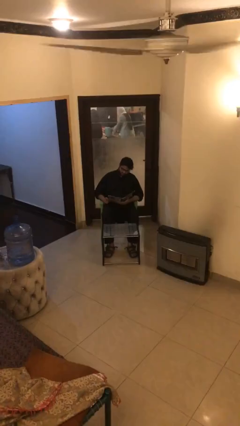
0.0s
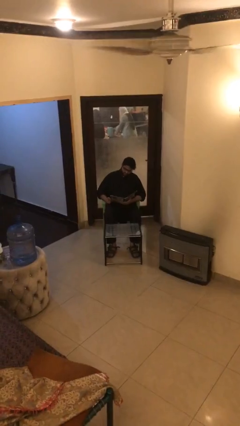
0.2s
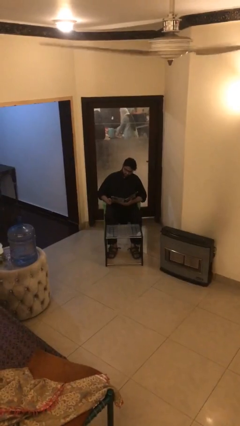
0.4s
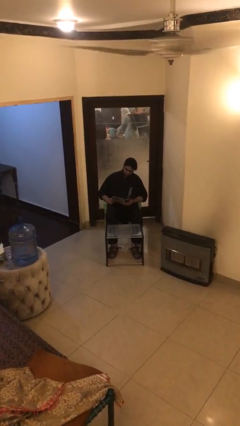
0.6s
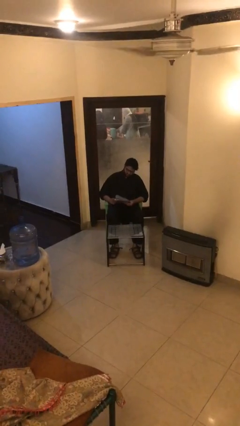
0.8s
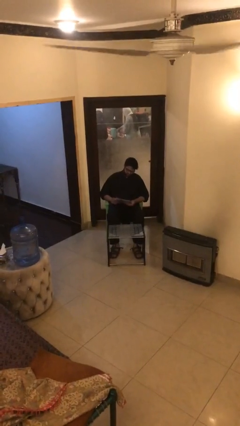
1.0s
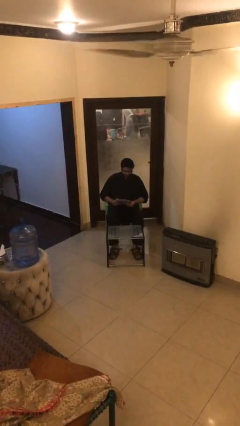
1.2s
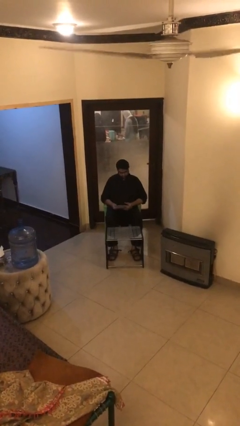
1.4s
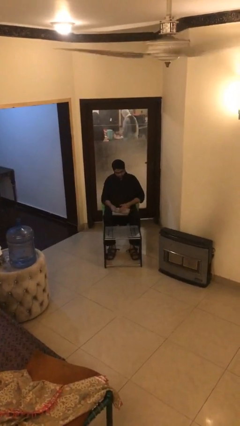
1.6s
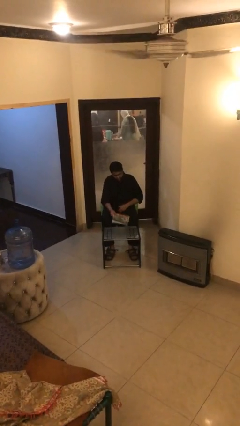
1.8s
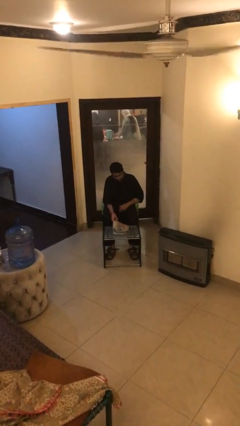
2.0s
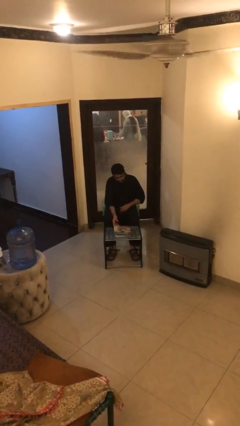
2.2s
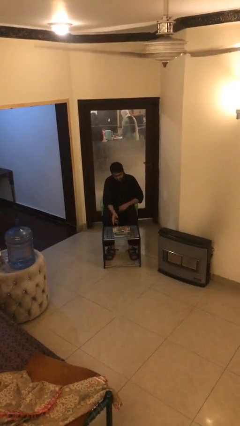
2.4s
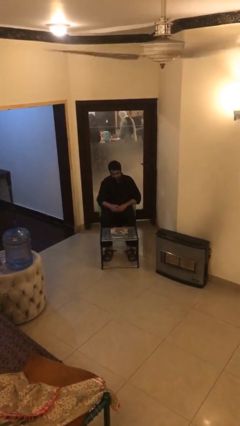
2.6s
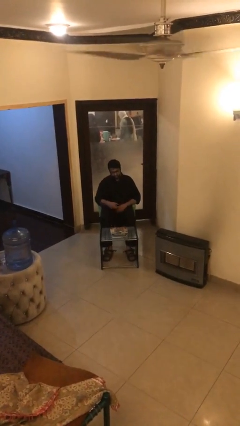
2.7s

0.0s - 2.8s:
person puts down object on table

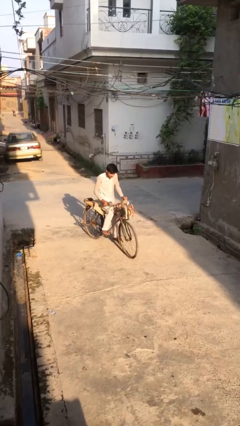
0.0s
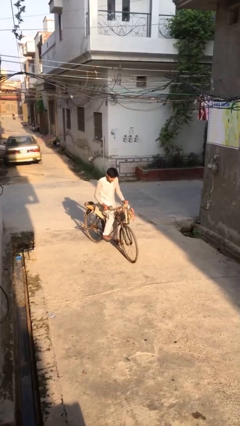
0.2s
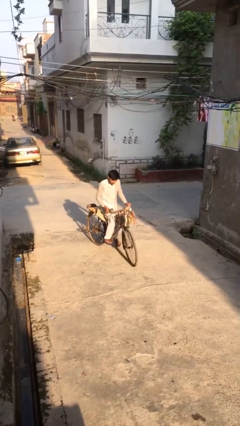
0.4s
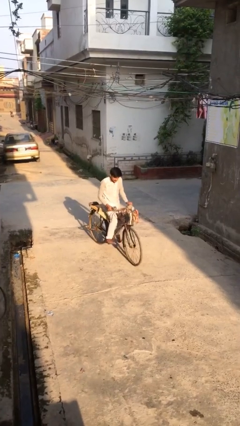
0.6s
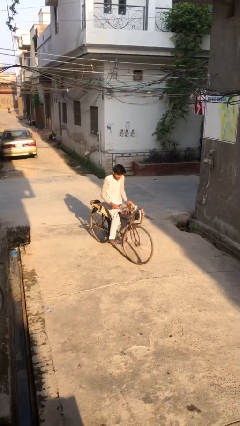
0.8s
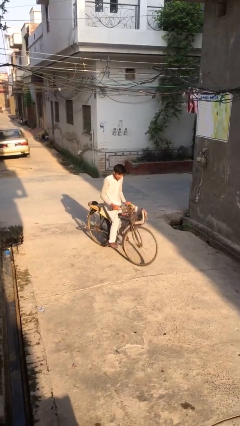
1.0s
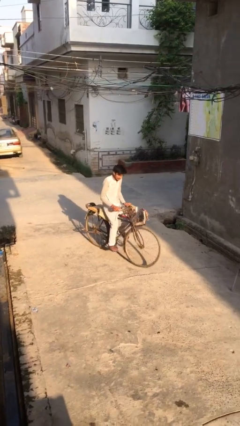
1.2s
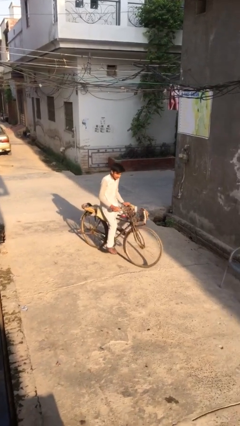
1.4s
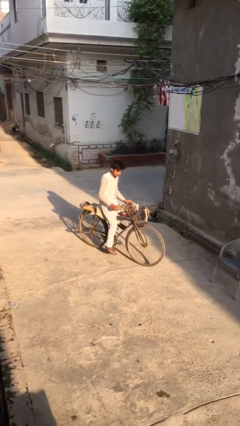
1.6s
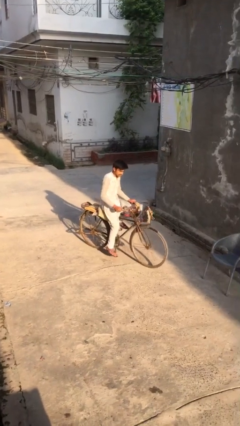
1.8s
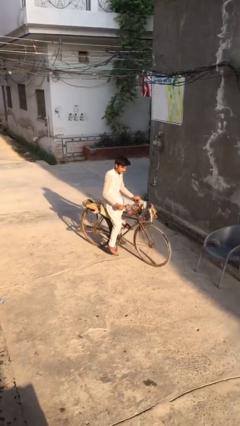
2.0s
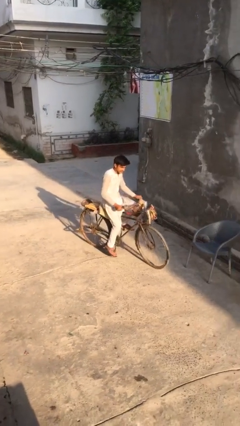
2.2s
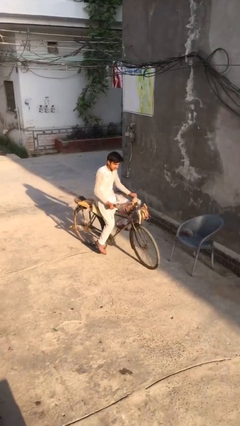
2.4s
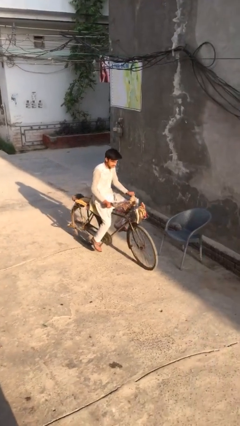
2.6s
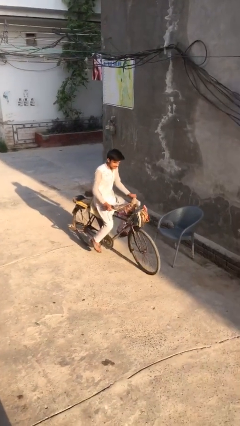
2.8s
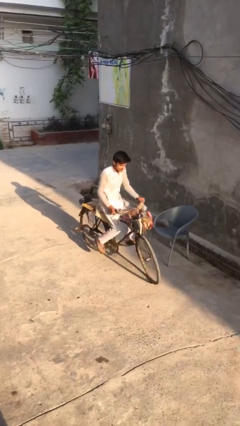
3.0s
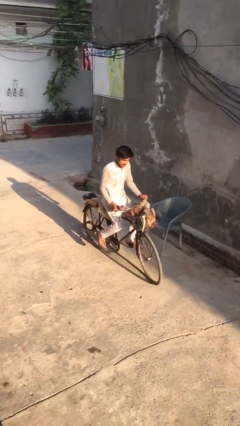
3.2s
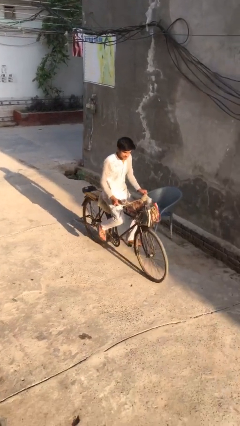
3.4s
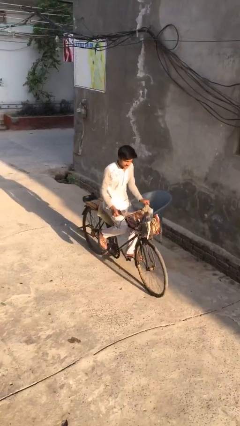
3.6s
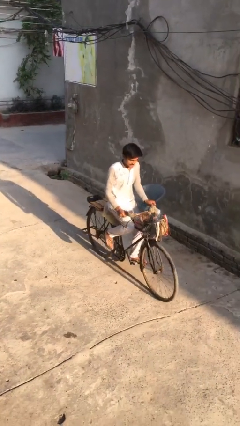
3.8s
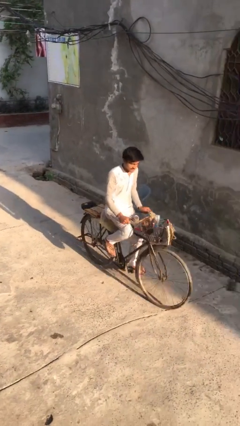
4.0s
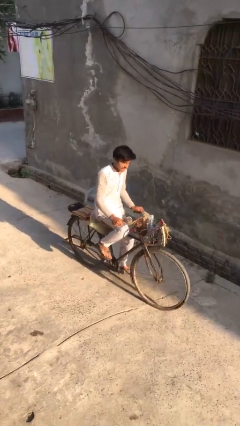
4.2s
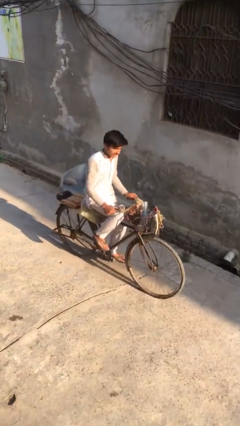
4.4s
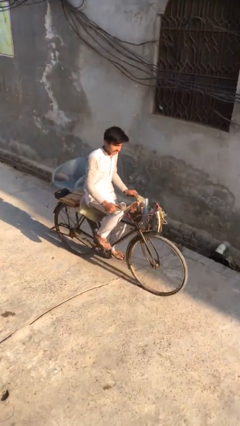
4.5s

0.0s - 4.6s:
person rides bicycle

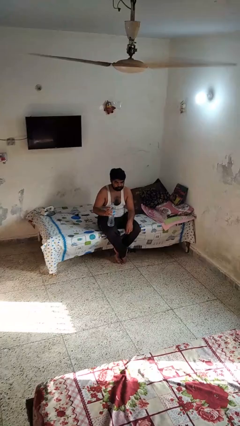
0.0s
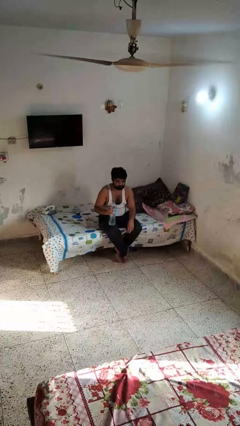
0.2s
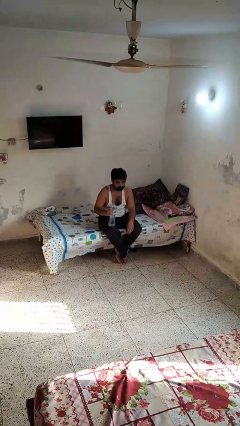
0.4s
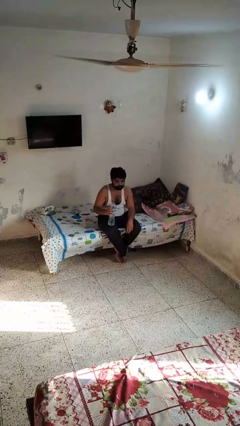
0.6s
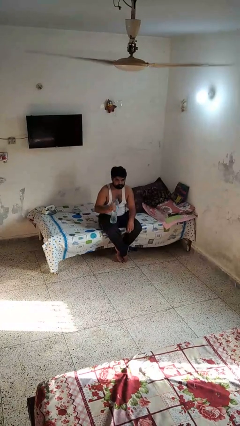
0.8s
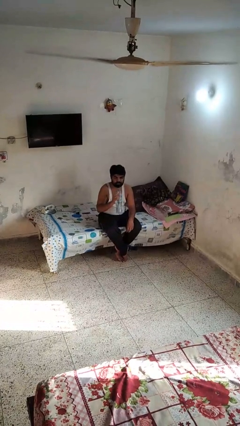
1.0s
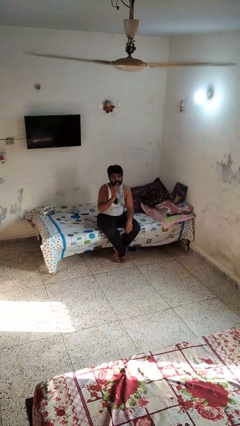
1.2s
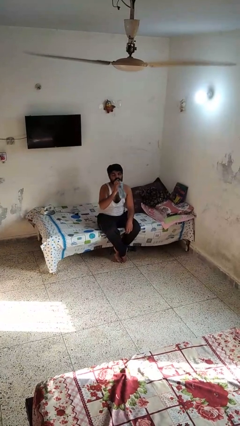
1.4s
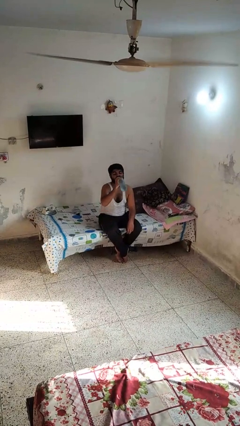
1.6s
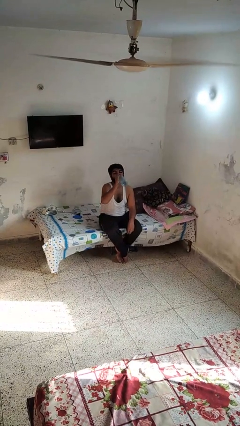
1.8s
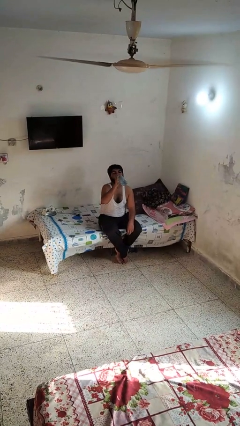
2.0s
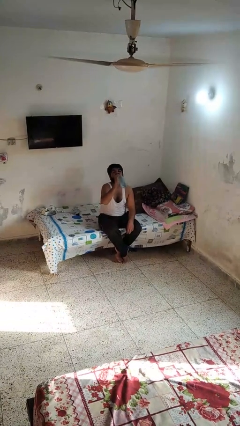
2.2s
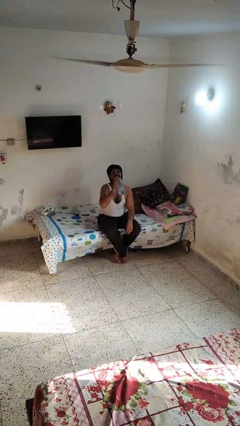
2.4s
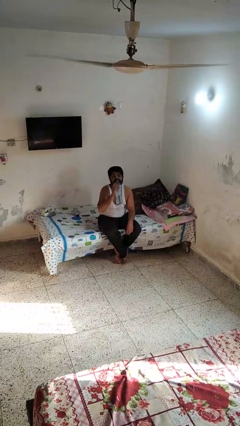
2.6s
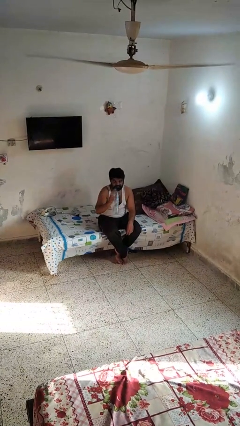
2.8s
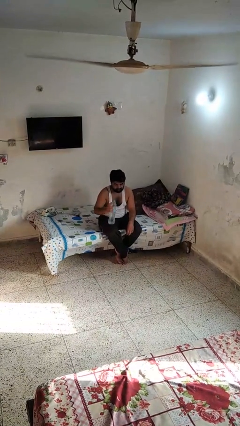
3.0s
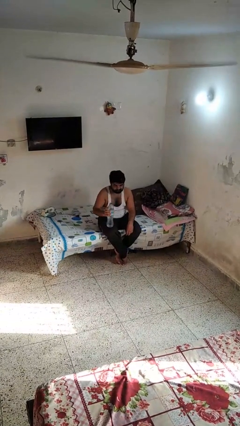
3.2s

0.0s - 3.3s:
person drinks from bottle

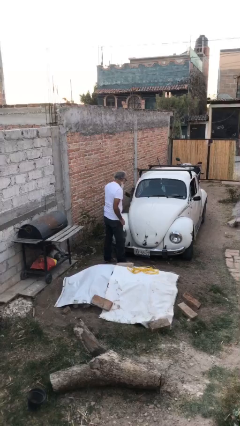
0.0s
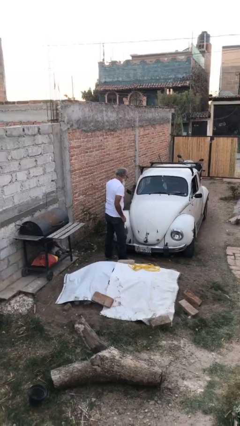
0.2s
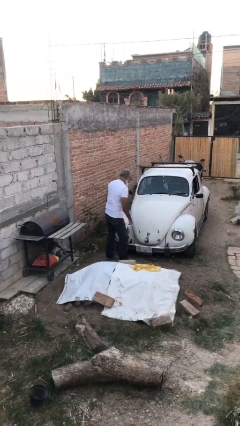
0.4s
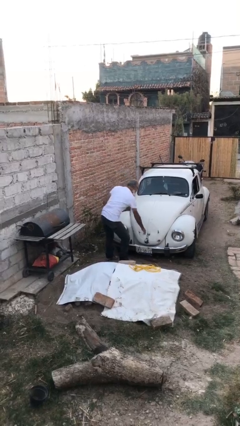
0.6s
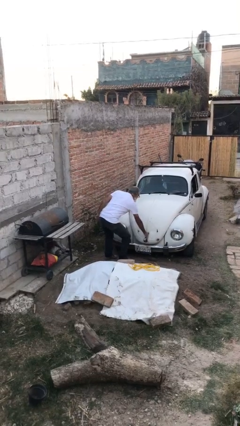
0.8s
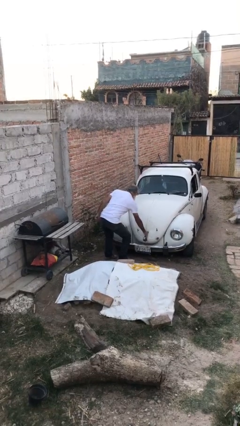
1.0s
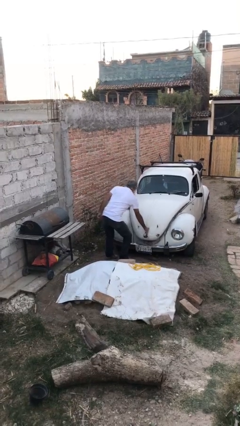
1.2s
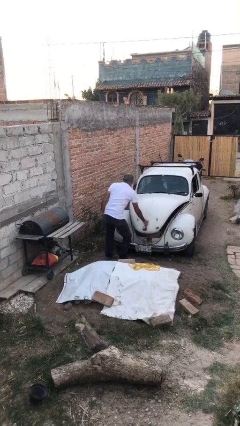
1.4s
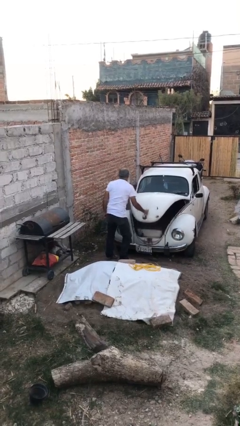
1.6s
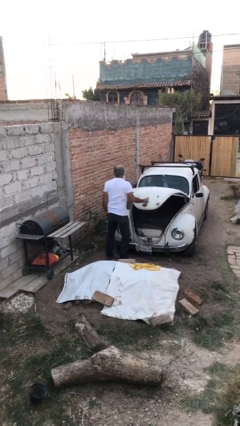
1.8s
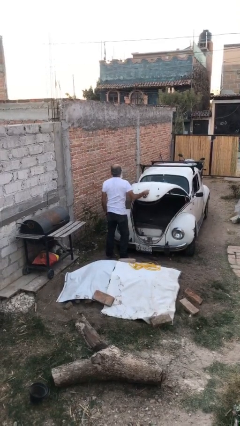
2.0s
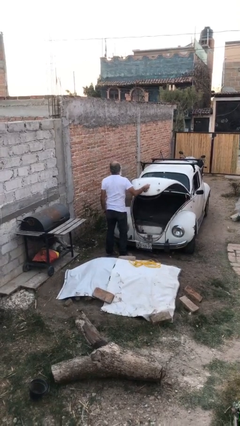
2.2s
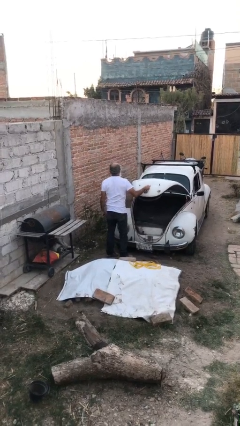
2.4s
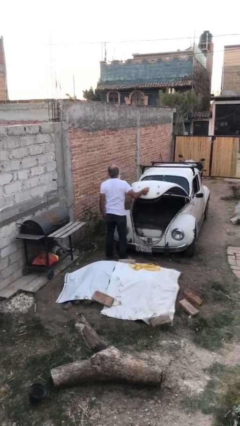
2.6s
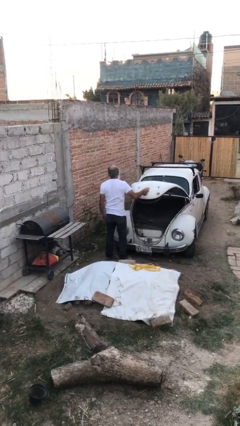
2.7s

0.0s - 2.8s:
person opens car trunk

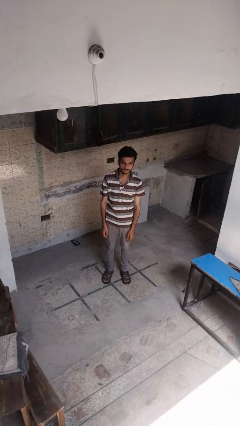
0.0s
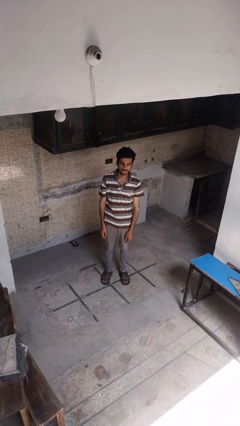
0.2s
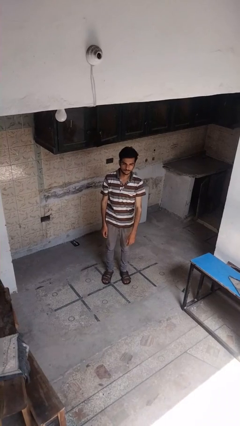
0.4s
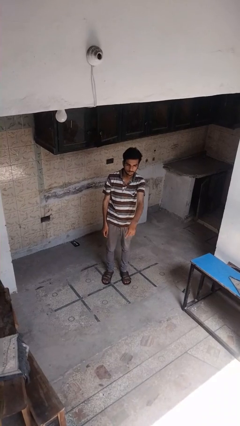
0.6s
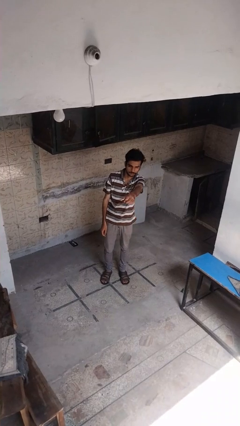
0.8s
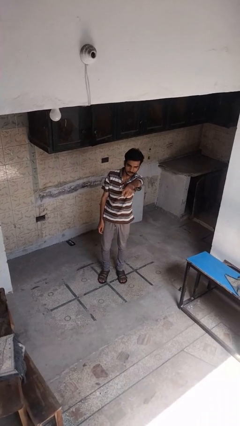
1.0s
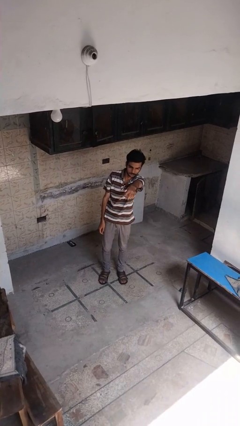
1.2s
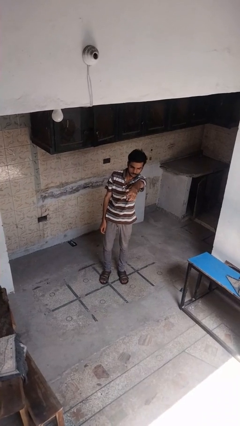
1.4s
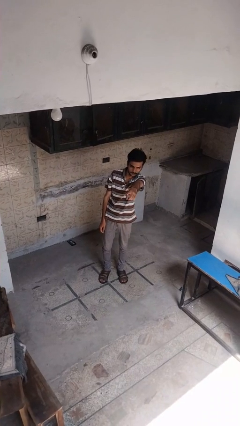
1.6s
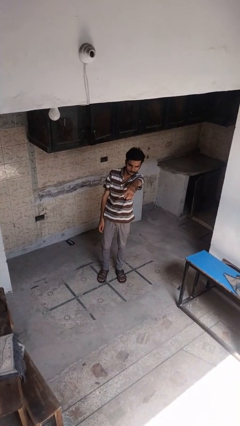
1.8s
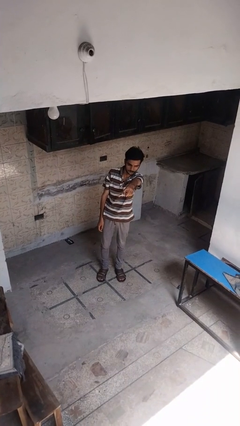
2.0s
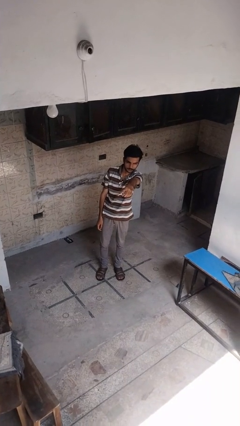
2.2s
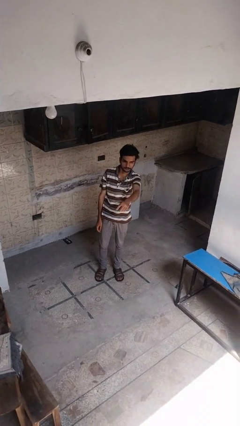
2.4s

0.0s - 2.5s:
person points at person

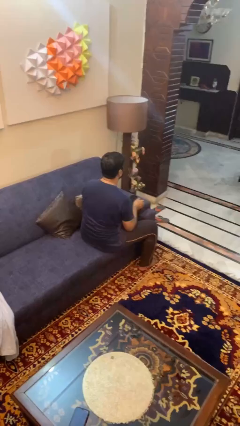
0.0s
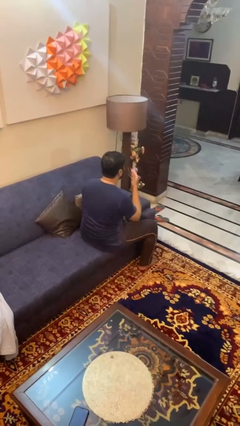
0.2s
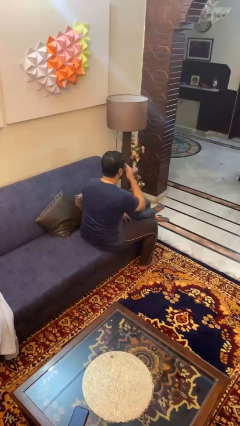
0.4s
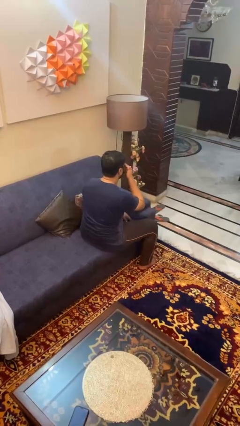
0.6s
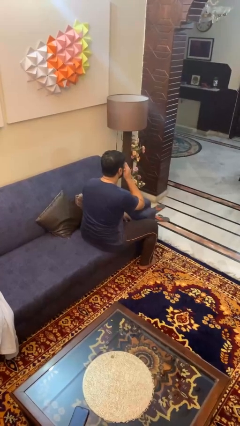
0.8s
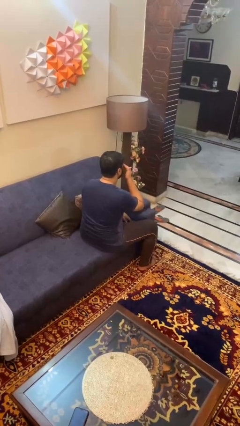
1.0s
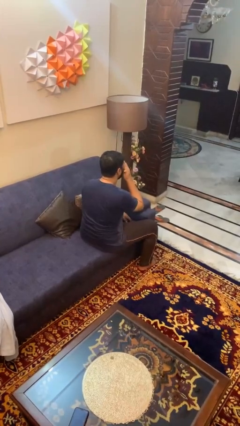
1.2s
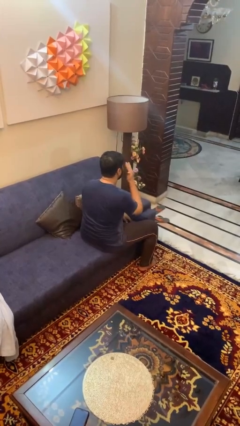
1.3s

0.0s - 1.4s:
person rubs eyes
